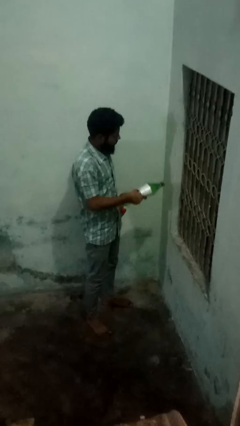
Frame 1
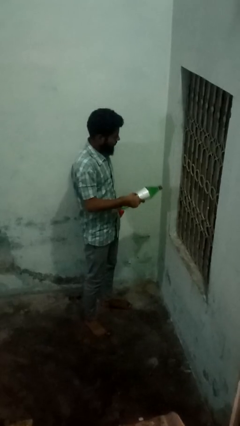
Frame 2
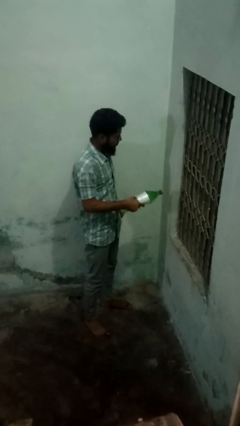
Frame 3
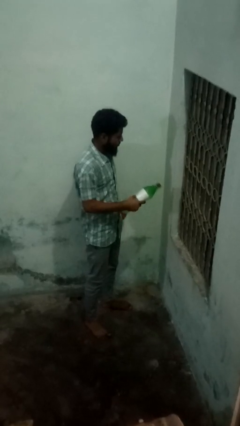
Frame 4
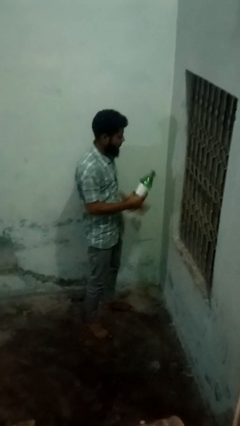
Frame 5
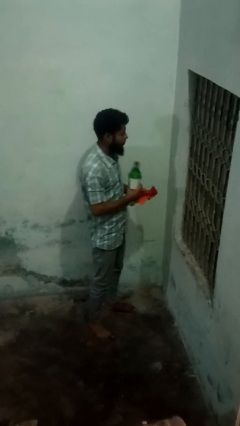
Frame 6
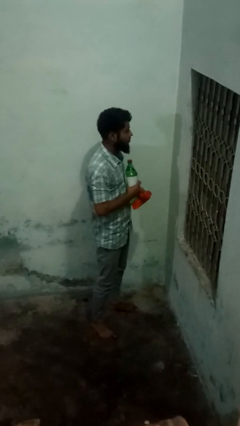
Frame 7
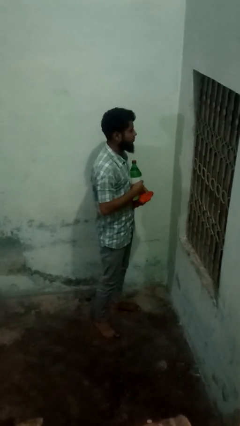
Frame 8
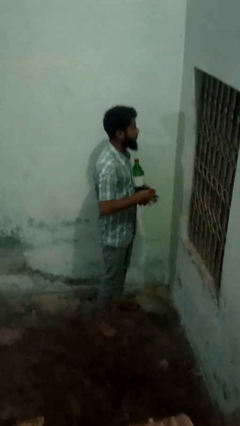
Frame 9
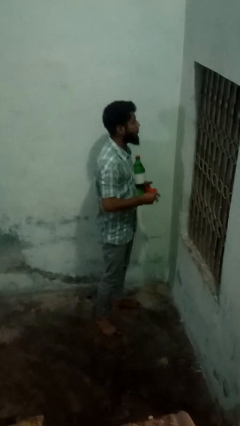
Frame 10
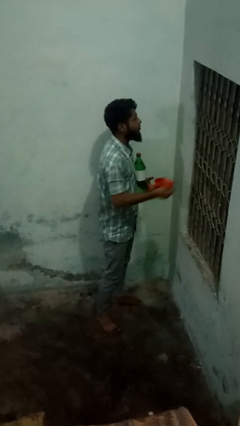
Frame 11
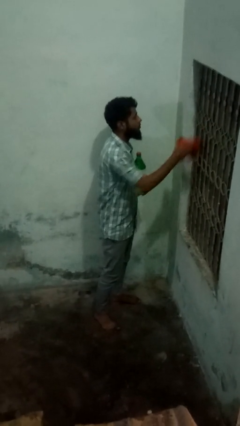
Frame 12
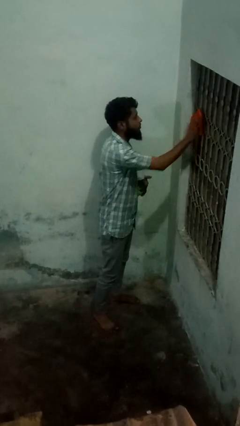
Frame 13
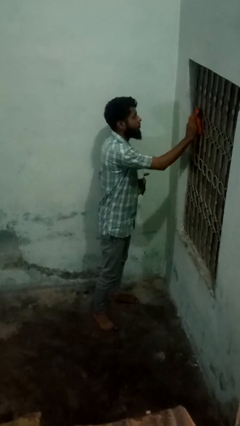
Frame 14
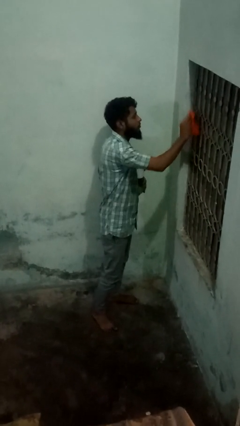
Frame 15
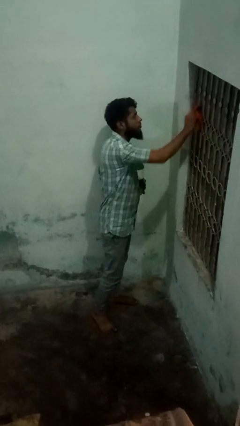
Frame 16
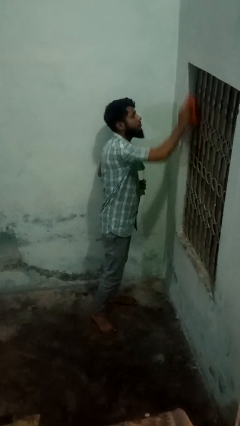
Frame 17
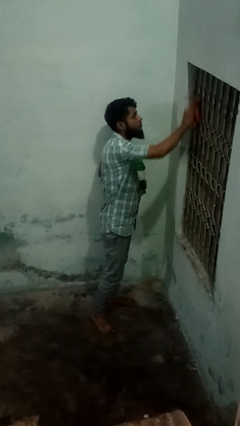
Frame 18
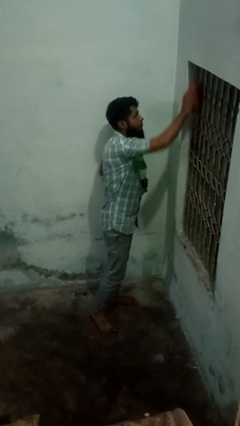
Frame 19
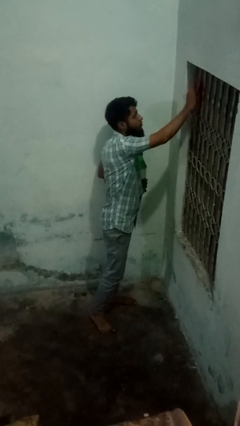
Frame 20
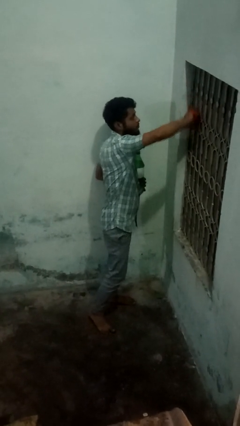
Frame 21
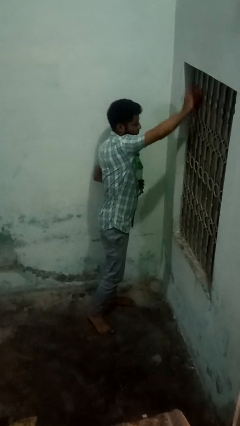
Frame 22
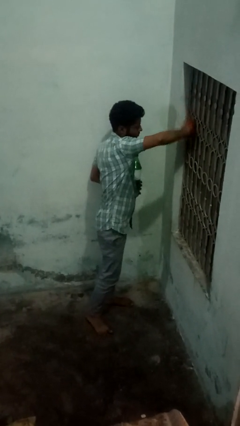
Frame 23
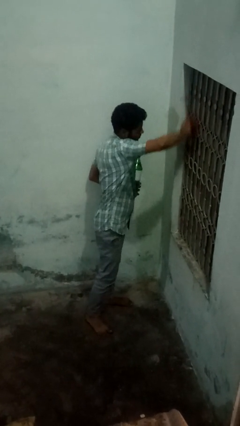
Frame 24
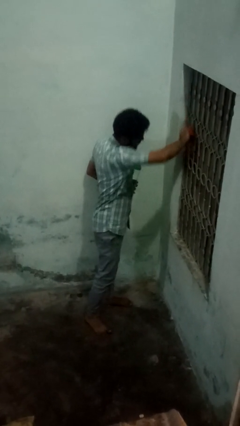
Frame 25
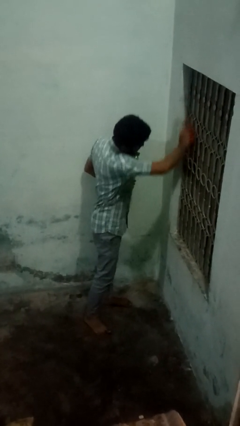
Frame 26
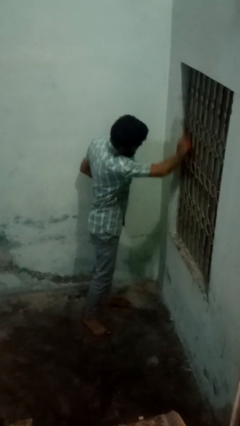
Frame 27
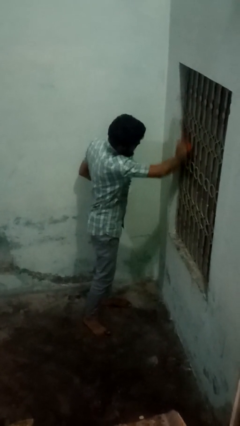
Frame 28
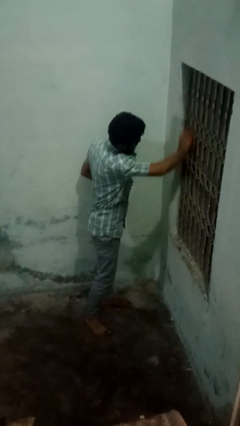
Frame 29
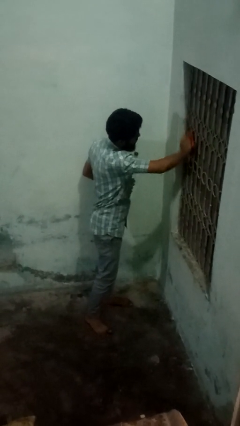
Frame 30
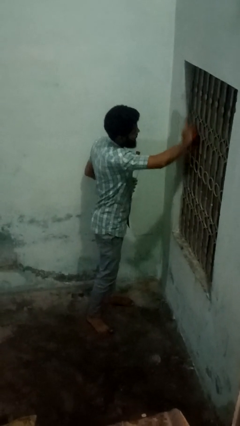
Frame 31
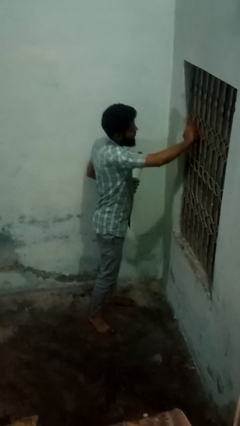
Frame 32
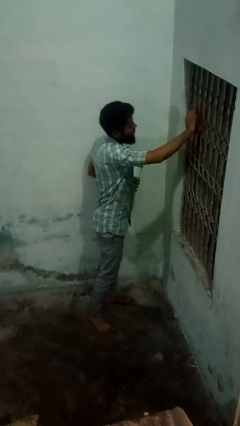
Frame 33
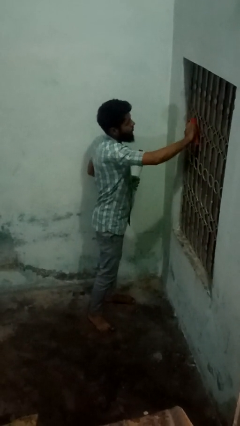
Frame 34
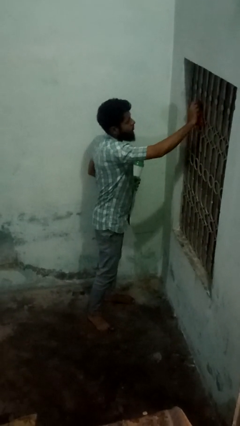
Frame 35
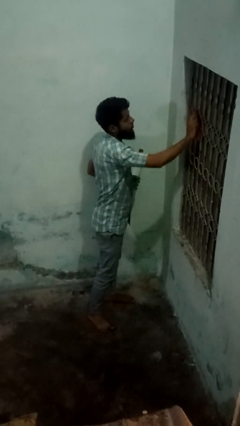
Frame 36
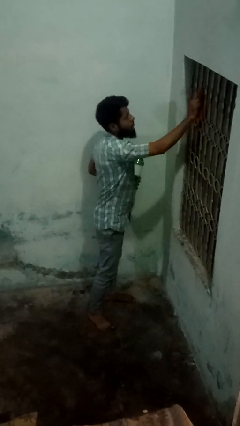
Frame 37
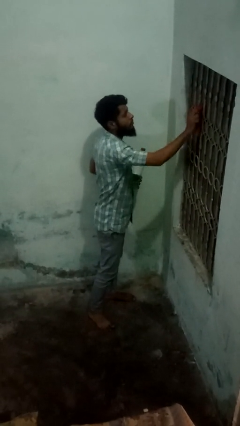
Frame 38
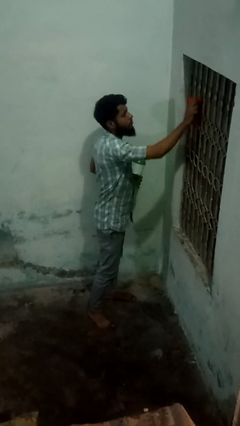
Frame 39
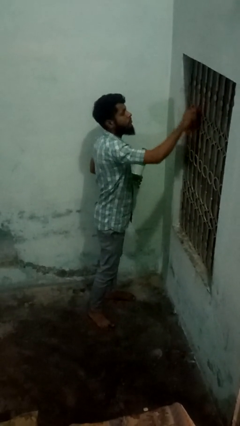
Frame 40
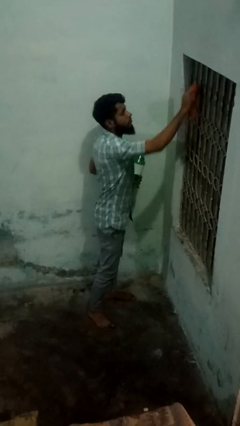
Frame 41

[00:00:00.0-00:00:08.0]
person washes window

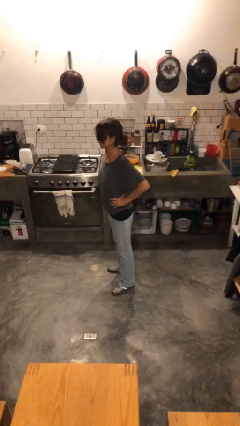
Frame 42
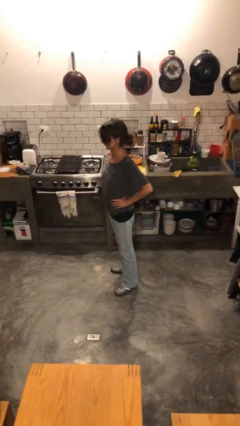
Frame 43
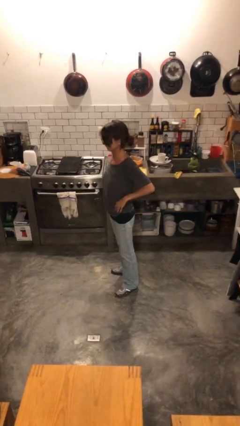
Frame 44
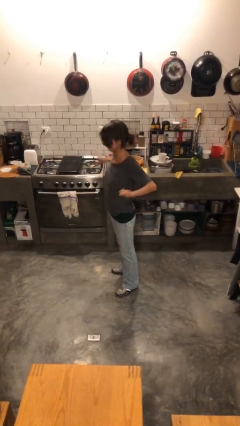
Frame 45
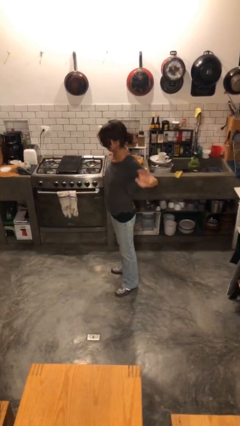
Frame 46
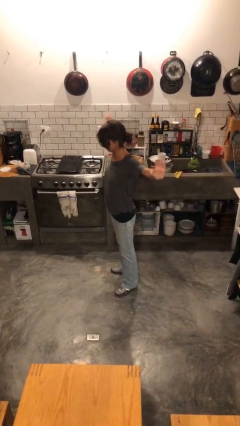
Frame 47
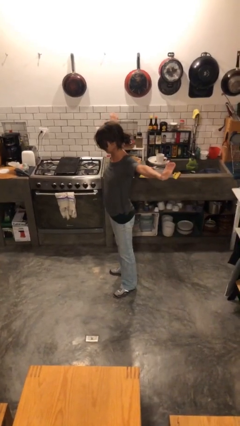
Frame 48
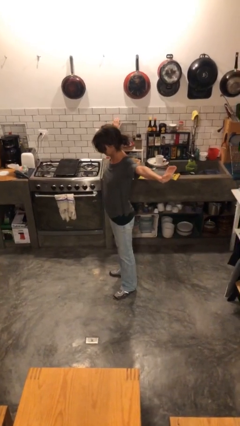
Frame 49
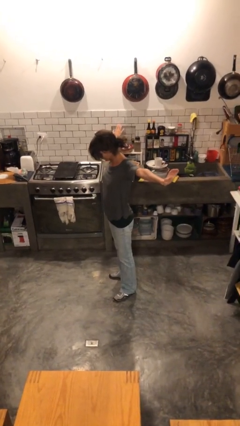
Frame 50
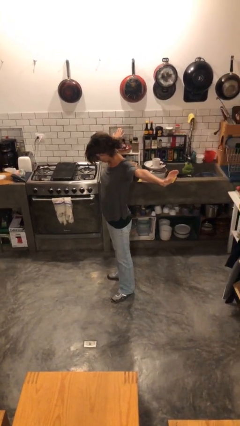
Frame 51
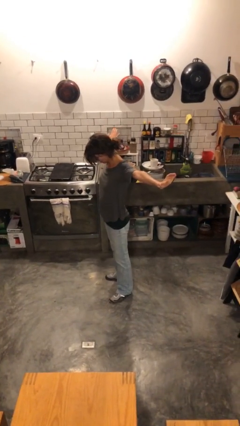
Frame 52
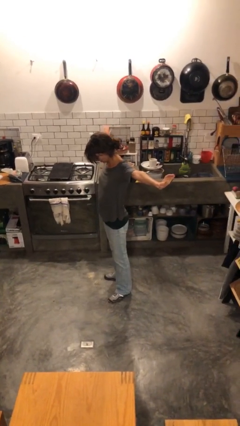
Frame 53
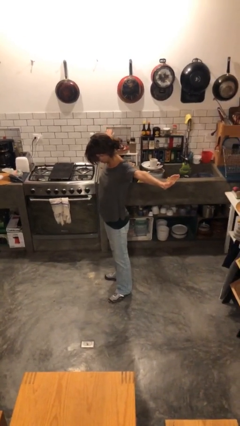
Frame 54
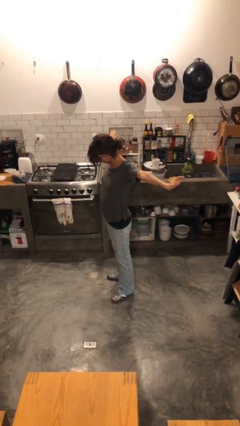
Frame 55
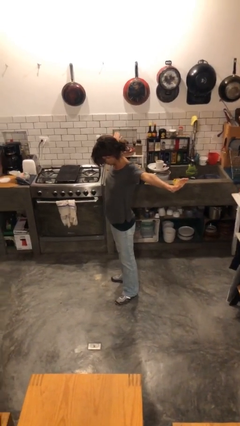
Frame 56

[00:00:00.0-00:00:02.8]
person stretches arms to side

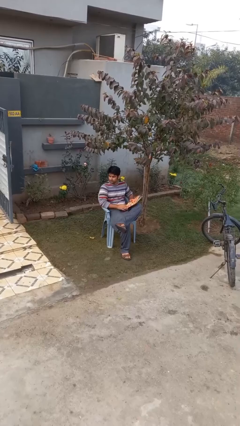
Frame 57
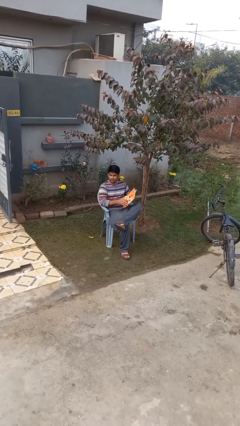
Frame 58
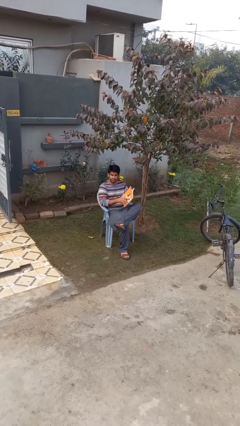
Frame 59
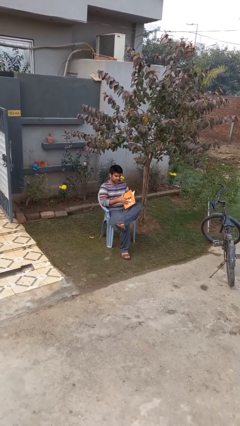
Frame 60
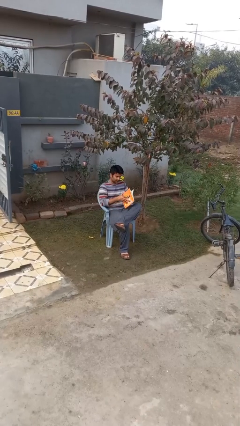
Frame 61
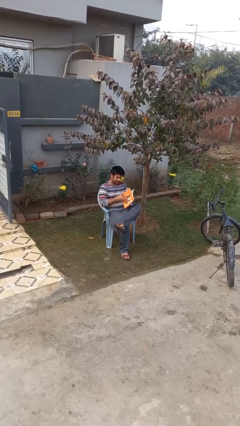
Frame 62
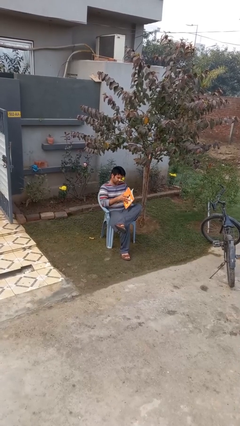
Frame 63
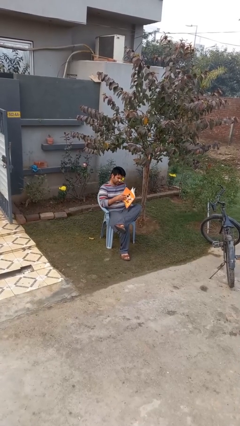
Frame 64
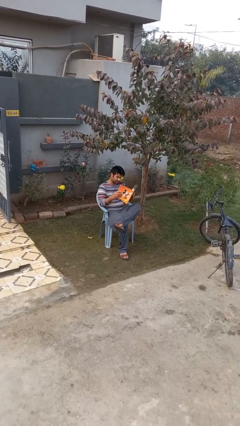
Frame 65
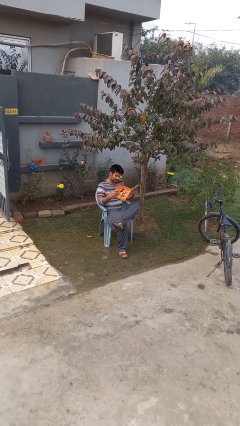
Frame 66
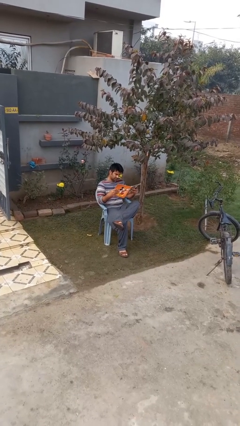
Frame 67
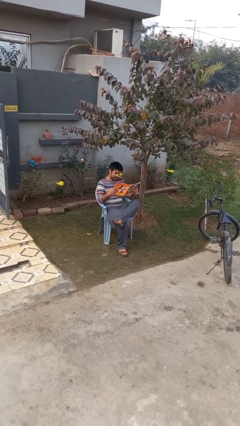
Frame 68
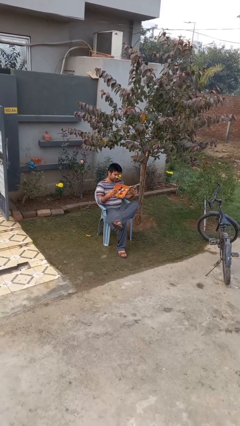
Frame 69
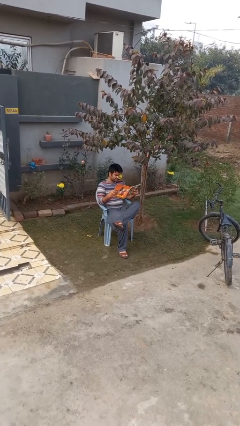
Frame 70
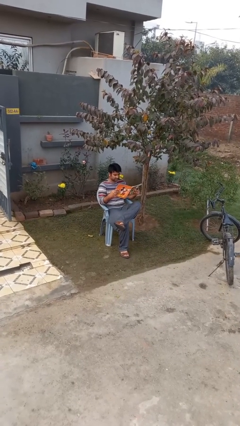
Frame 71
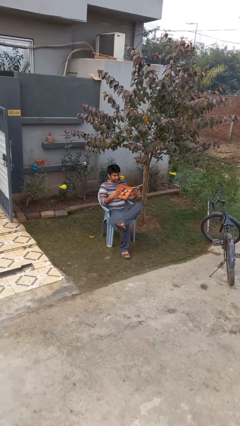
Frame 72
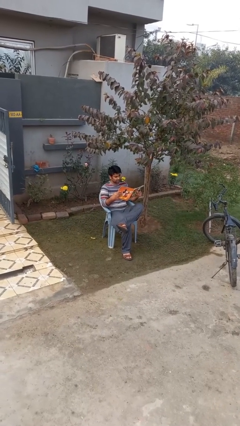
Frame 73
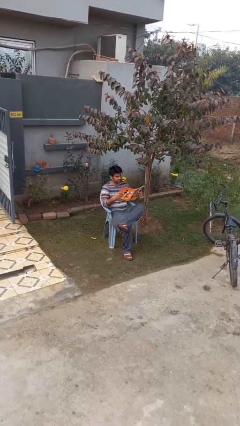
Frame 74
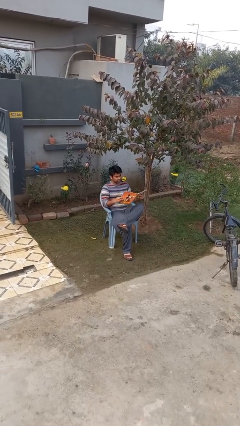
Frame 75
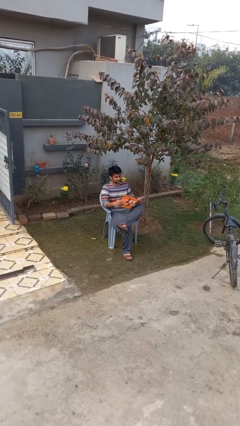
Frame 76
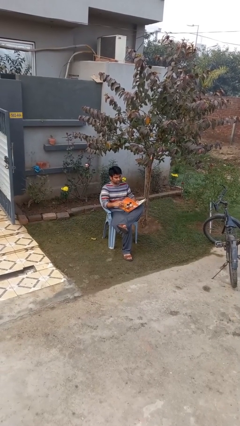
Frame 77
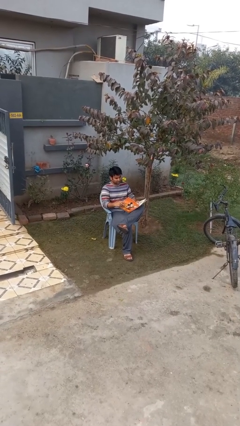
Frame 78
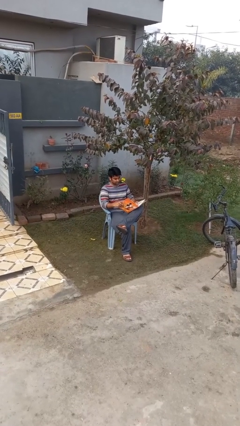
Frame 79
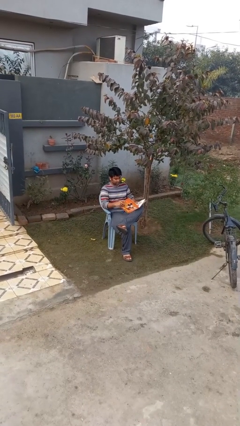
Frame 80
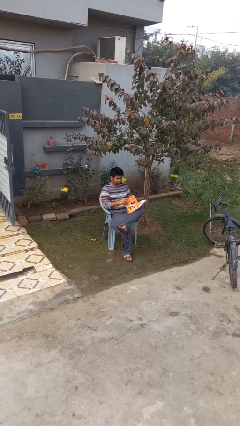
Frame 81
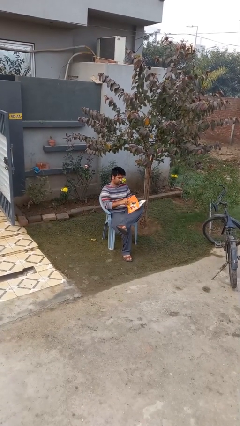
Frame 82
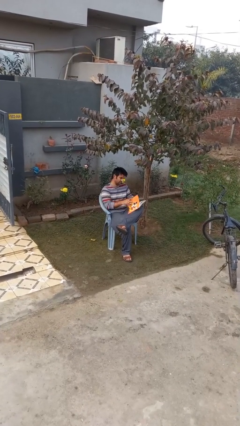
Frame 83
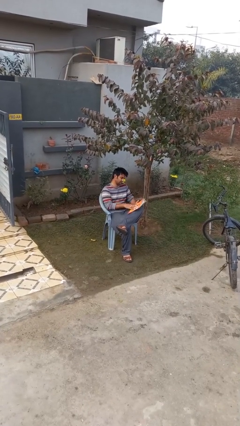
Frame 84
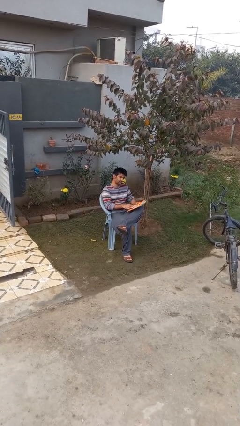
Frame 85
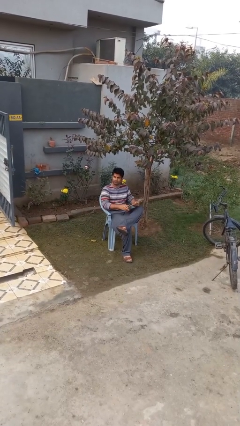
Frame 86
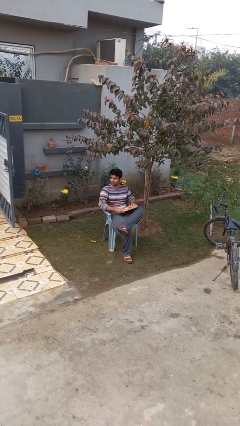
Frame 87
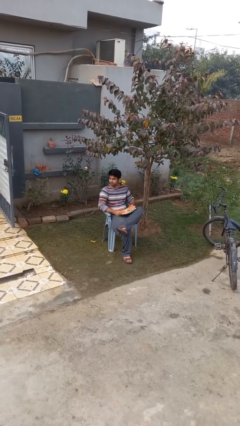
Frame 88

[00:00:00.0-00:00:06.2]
person reads document

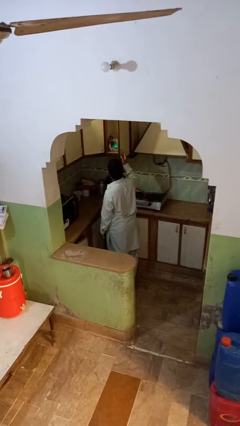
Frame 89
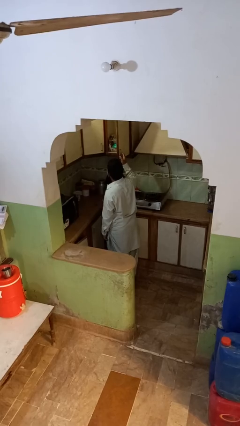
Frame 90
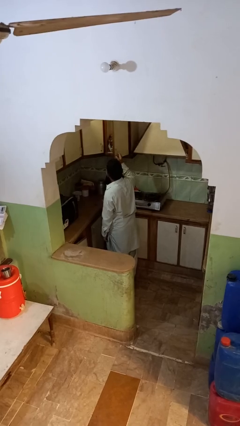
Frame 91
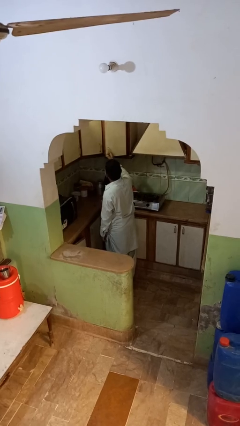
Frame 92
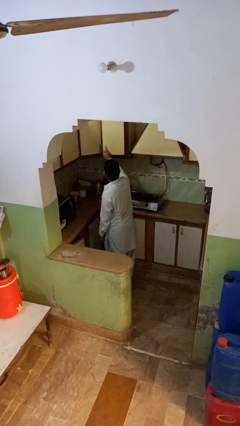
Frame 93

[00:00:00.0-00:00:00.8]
person closes cabinet
